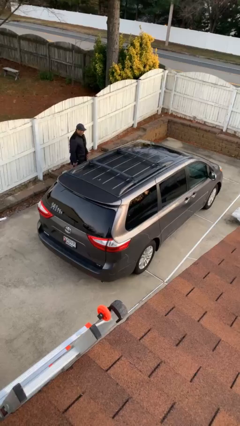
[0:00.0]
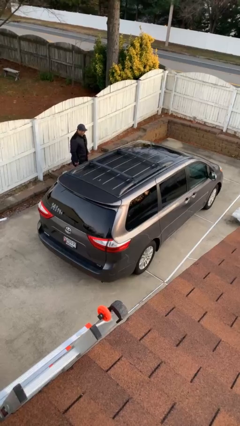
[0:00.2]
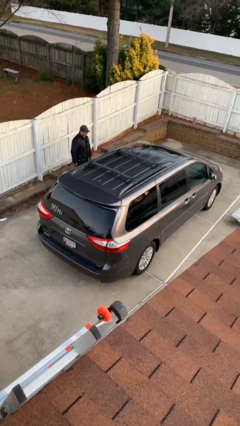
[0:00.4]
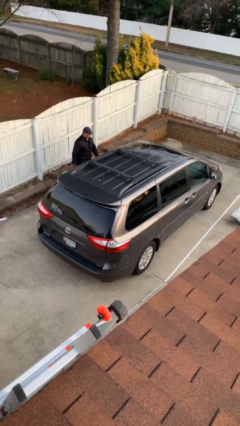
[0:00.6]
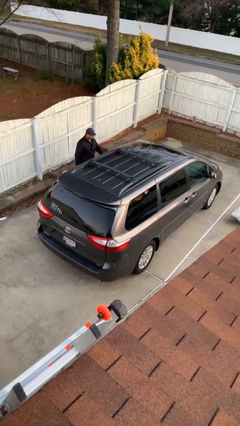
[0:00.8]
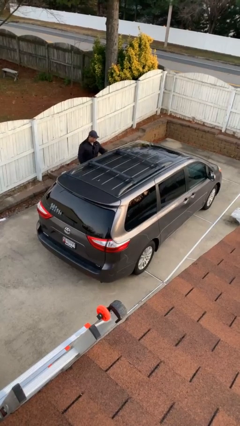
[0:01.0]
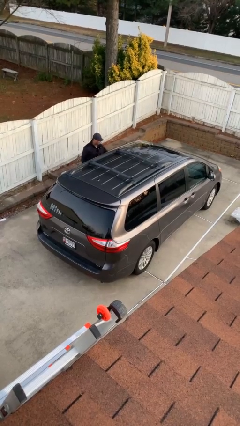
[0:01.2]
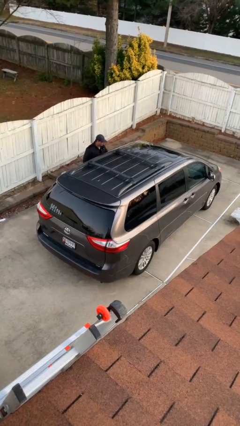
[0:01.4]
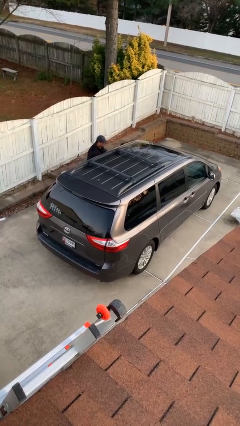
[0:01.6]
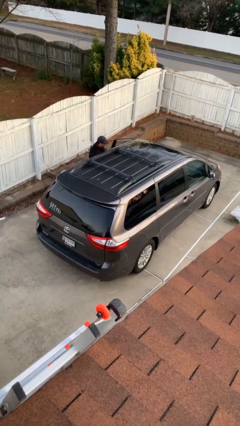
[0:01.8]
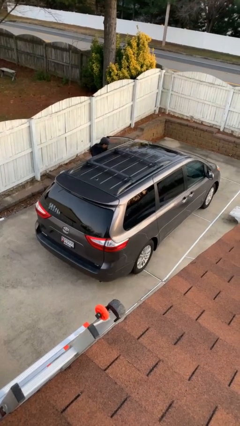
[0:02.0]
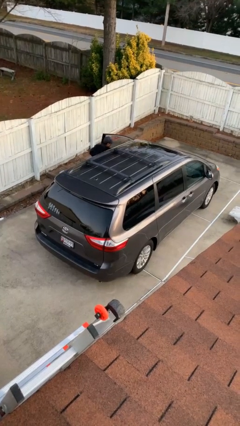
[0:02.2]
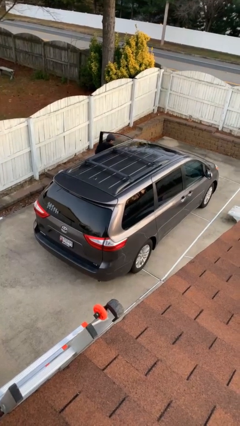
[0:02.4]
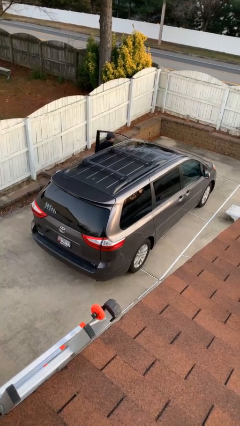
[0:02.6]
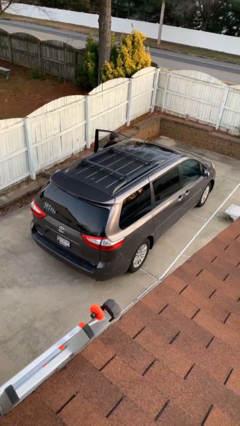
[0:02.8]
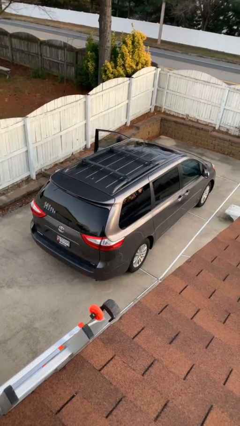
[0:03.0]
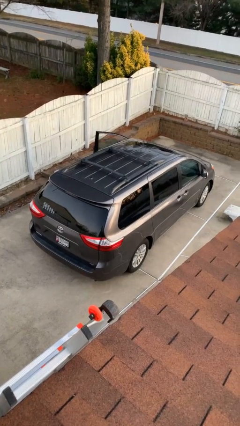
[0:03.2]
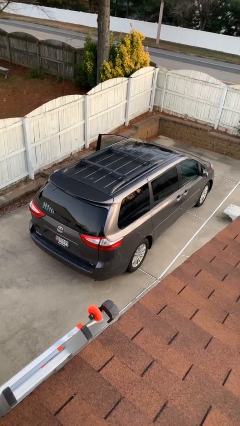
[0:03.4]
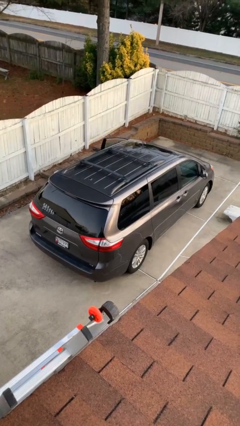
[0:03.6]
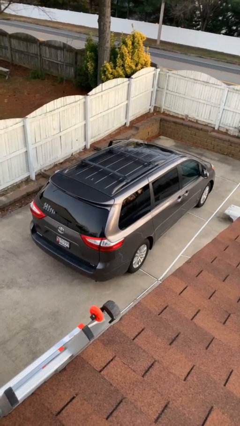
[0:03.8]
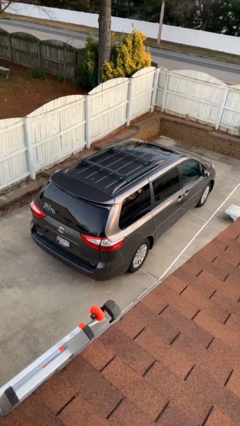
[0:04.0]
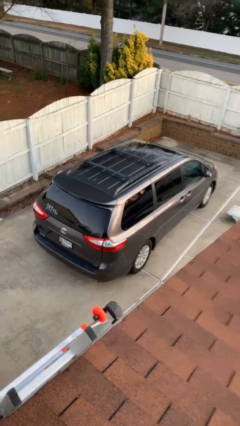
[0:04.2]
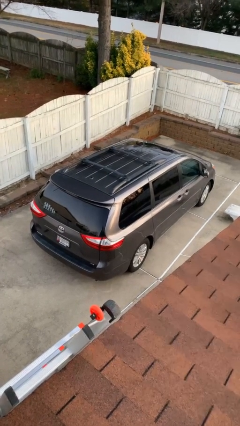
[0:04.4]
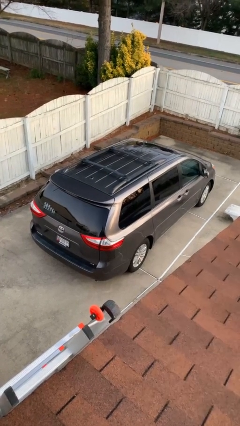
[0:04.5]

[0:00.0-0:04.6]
car picks up person

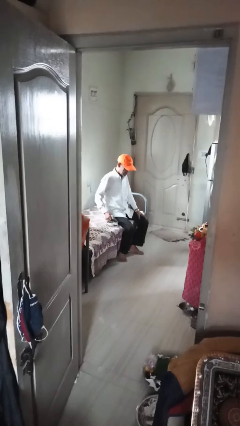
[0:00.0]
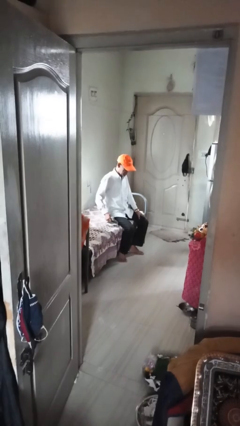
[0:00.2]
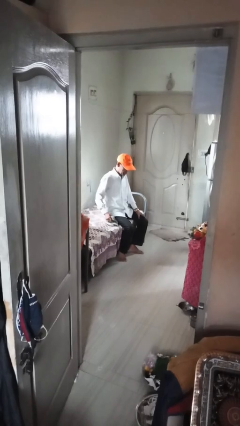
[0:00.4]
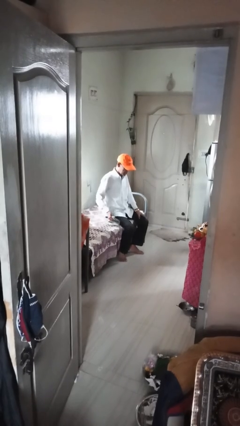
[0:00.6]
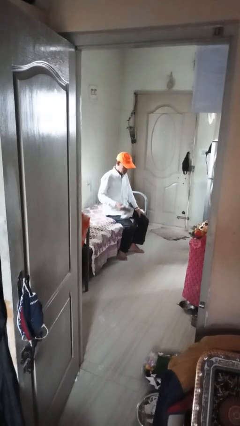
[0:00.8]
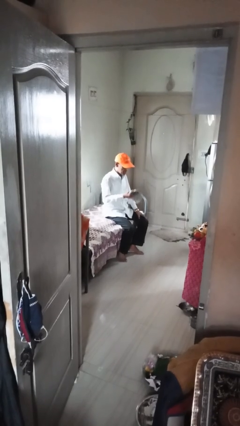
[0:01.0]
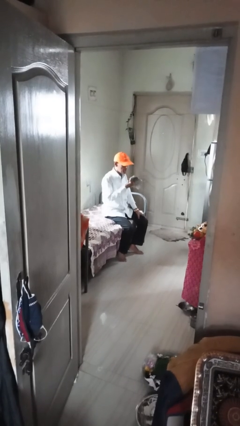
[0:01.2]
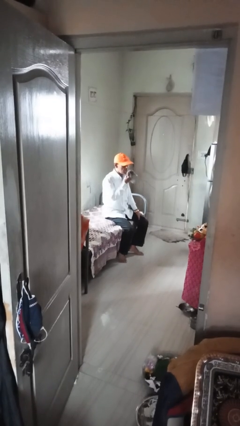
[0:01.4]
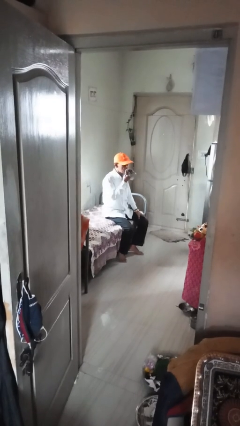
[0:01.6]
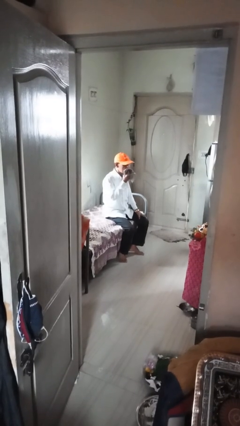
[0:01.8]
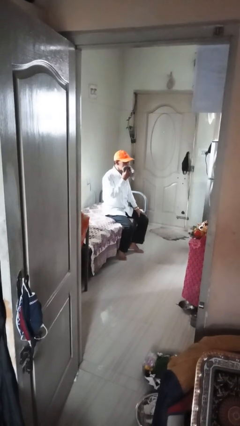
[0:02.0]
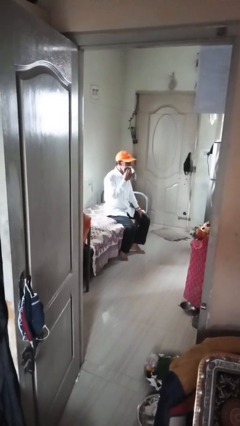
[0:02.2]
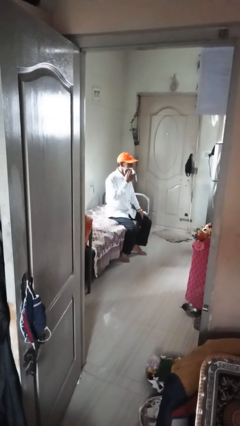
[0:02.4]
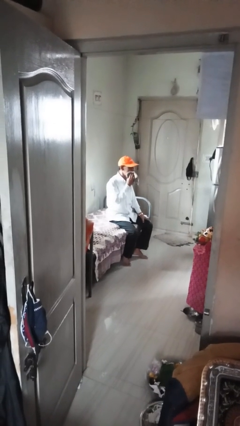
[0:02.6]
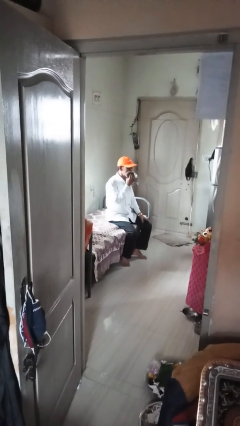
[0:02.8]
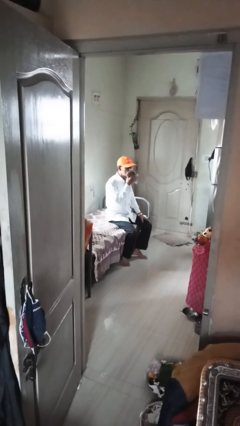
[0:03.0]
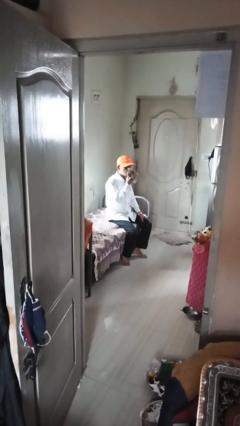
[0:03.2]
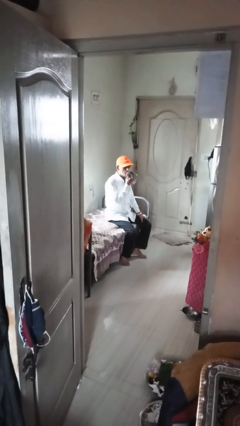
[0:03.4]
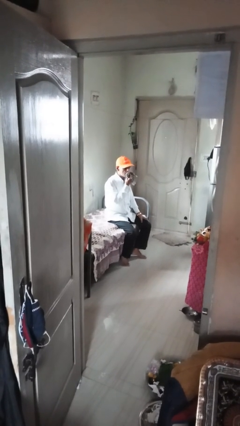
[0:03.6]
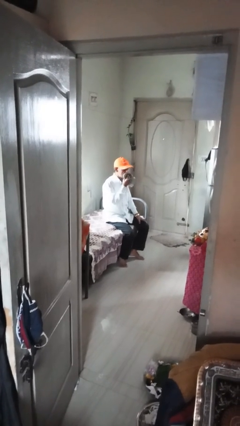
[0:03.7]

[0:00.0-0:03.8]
person wipes mouth with napkin

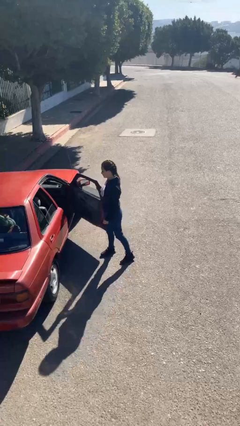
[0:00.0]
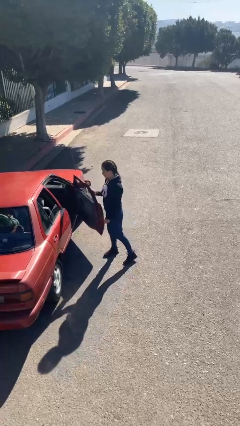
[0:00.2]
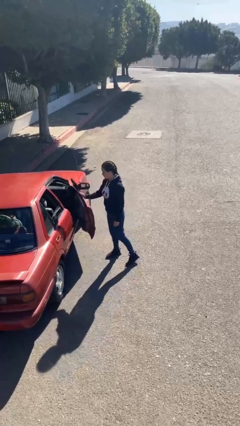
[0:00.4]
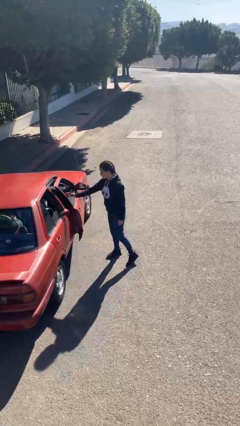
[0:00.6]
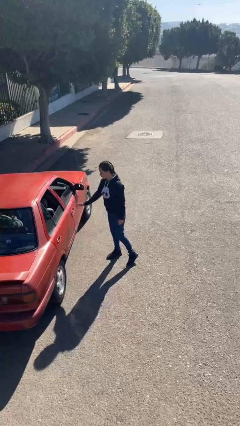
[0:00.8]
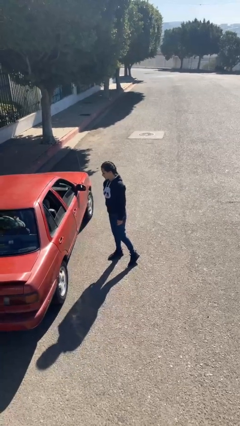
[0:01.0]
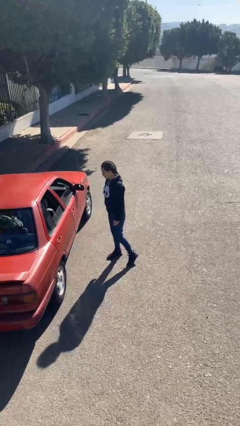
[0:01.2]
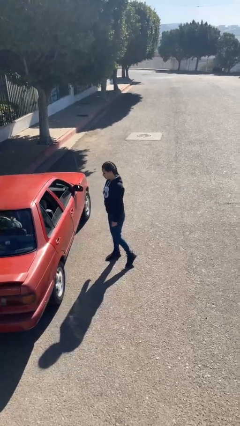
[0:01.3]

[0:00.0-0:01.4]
person closes car door

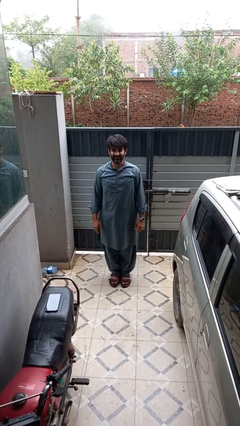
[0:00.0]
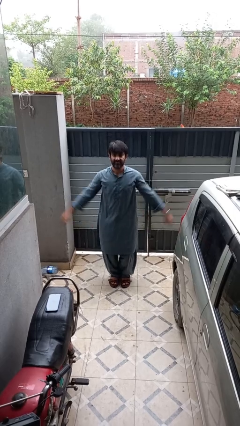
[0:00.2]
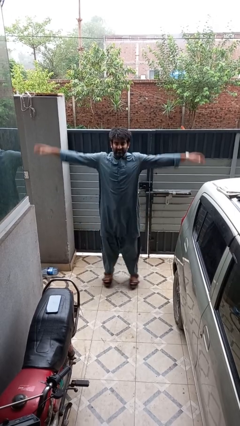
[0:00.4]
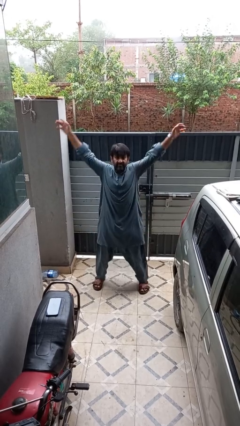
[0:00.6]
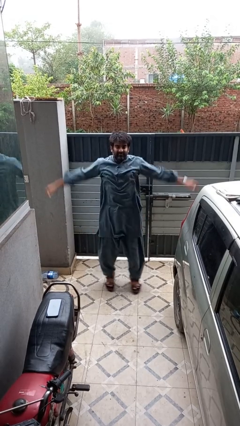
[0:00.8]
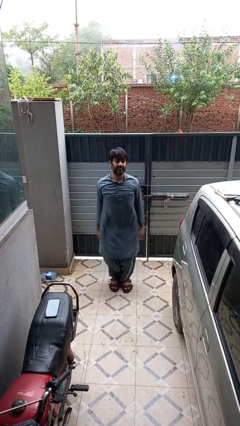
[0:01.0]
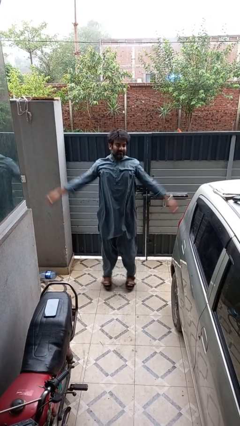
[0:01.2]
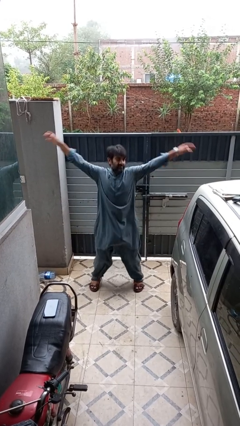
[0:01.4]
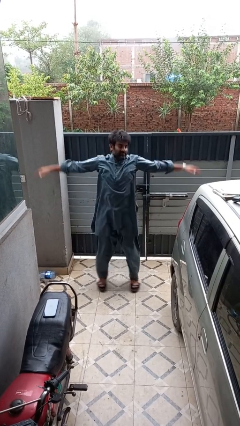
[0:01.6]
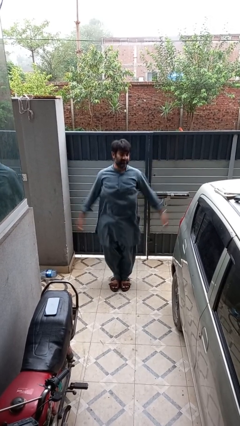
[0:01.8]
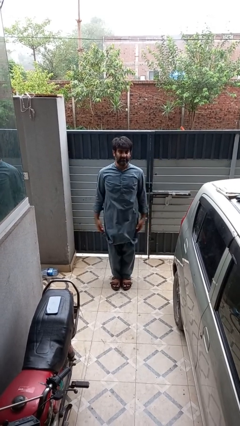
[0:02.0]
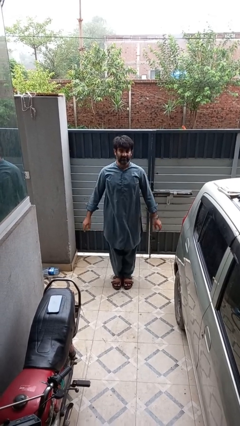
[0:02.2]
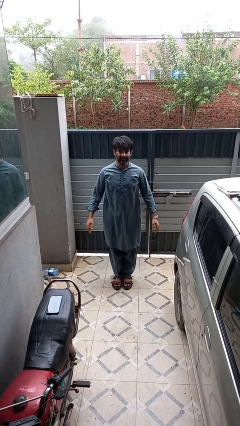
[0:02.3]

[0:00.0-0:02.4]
person exercises with jumping jacks

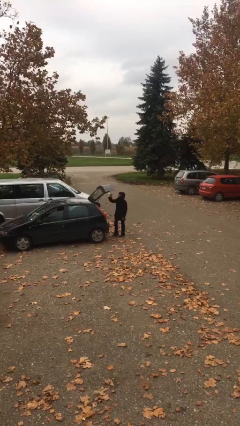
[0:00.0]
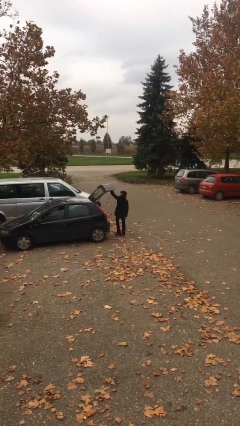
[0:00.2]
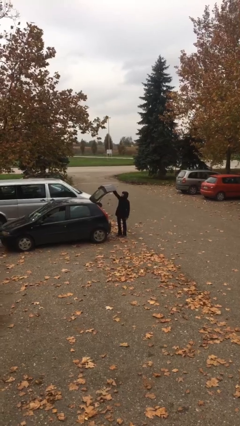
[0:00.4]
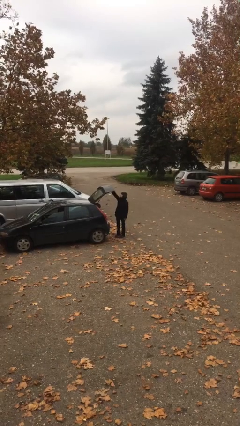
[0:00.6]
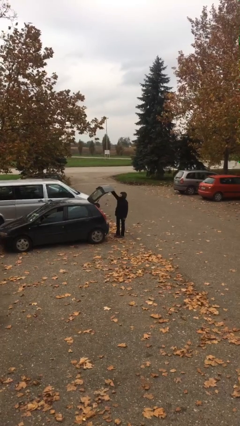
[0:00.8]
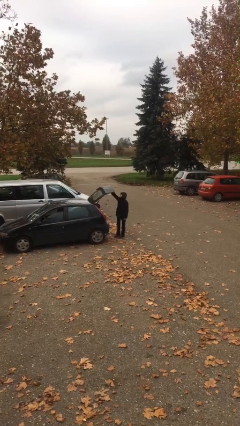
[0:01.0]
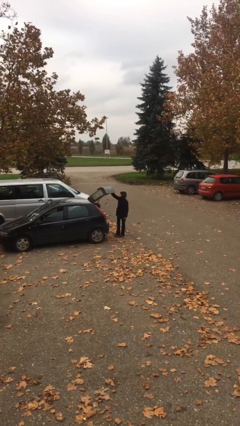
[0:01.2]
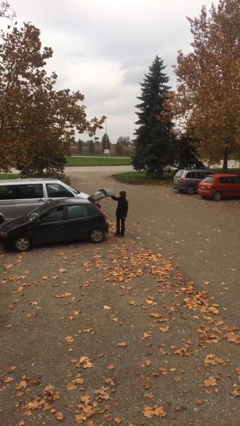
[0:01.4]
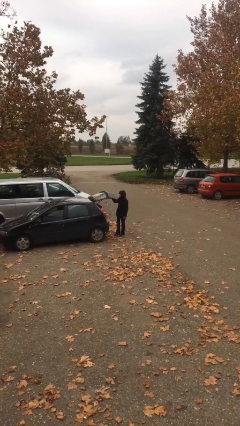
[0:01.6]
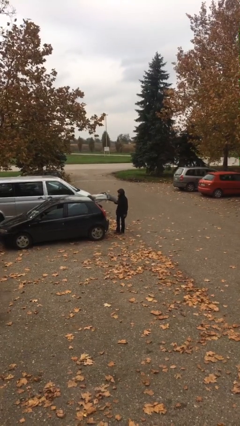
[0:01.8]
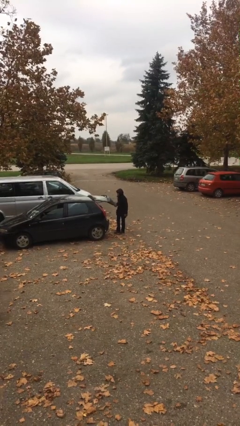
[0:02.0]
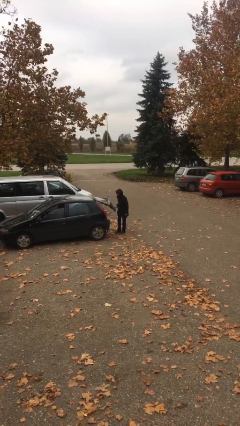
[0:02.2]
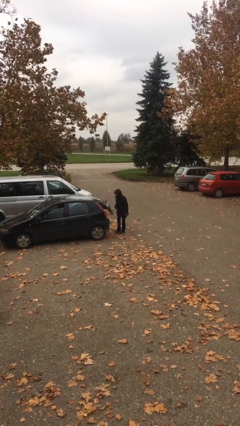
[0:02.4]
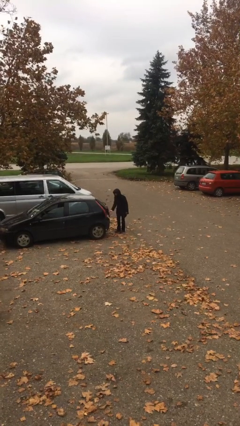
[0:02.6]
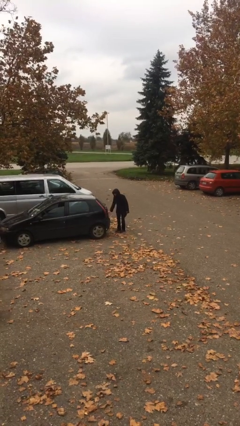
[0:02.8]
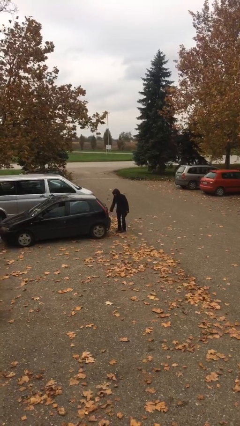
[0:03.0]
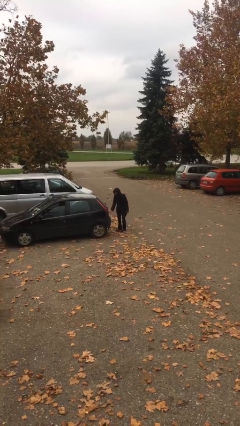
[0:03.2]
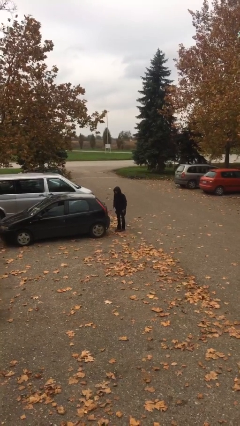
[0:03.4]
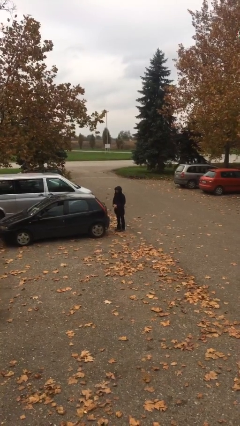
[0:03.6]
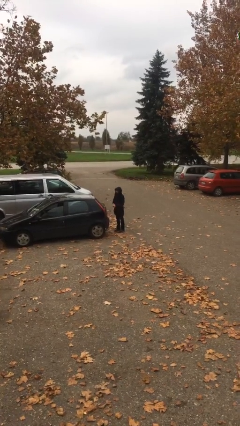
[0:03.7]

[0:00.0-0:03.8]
person closes car trunk

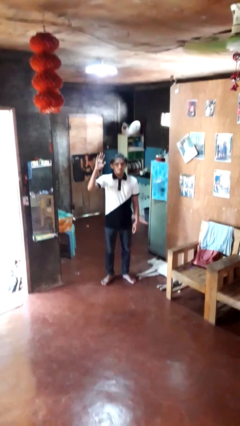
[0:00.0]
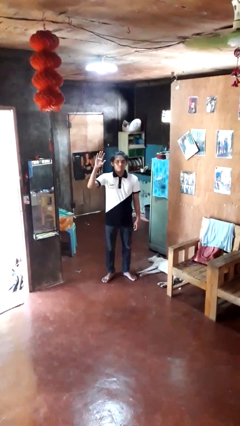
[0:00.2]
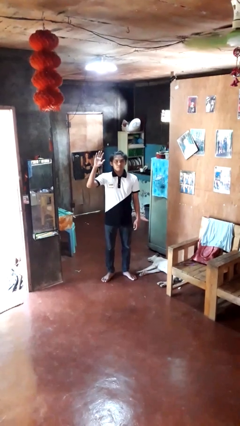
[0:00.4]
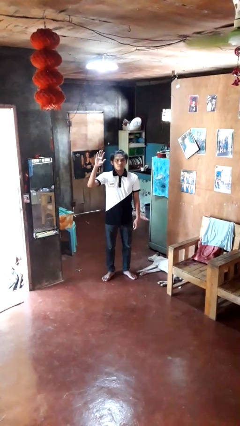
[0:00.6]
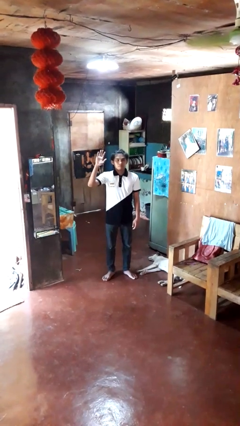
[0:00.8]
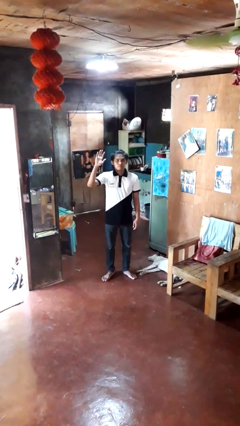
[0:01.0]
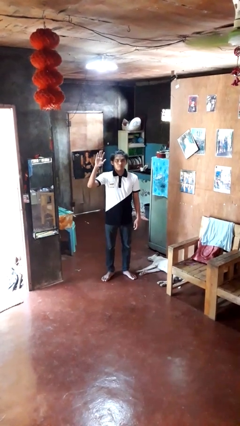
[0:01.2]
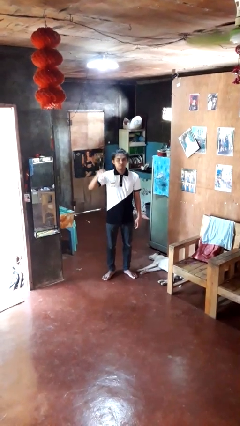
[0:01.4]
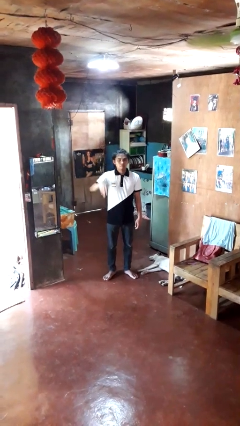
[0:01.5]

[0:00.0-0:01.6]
person gestures raise hand
